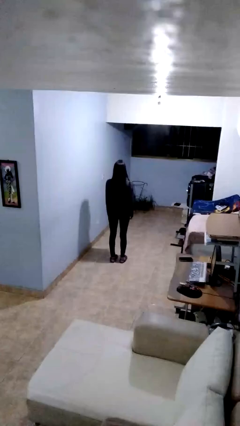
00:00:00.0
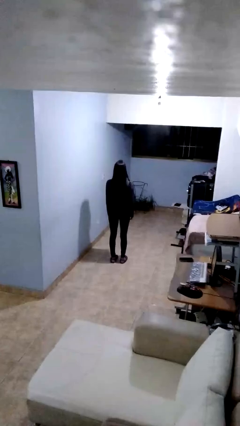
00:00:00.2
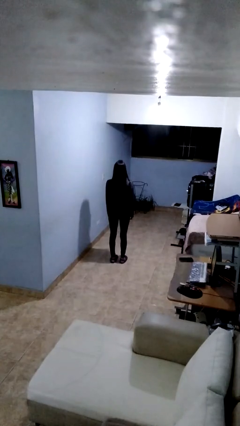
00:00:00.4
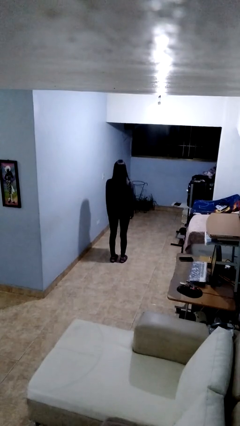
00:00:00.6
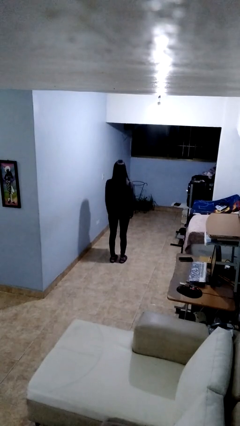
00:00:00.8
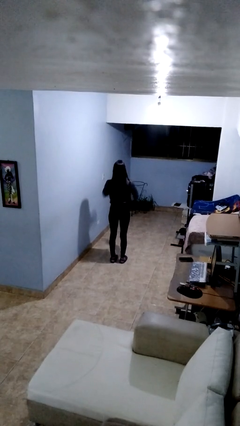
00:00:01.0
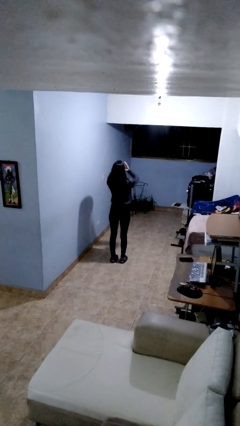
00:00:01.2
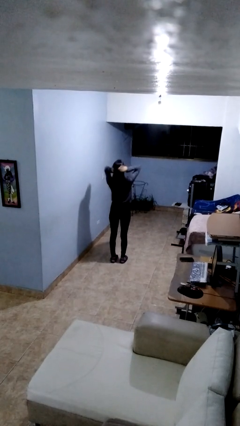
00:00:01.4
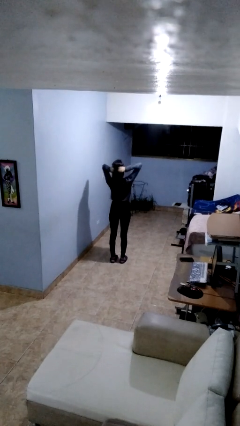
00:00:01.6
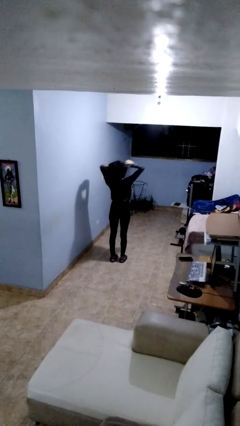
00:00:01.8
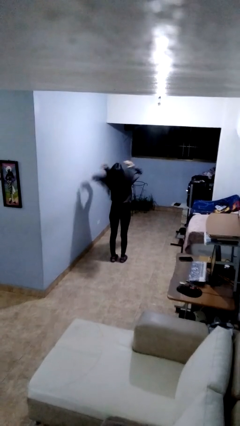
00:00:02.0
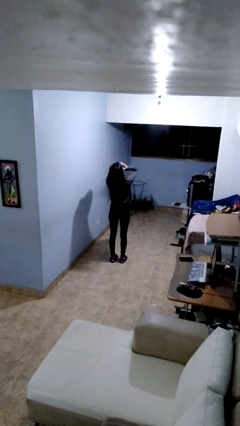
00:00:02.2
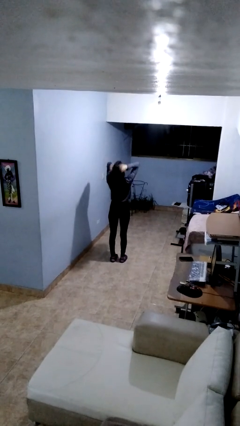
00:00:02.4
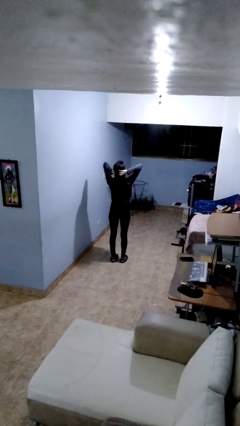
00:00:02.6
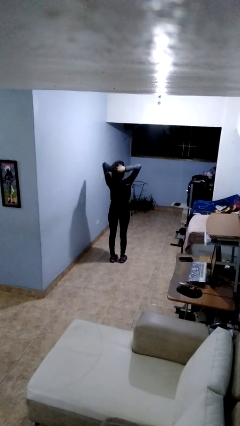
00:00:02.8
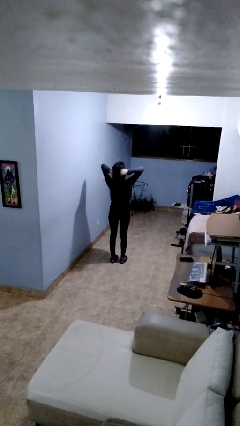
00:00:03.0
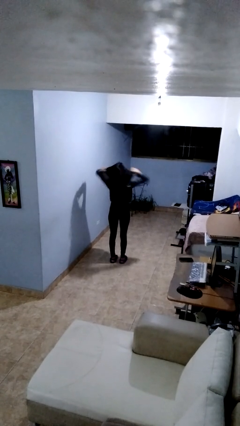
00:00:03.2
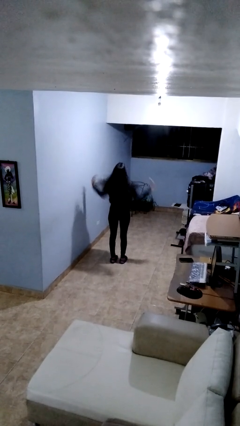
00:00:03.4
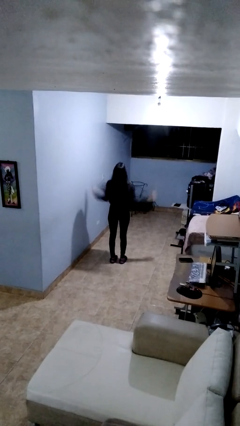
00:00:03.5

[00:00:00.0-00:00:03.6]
person strokes hair

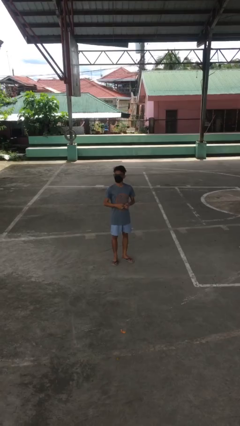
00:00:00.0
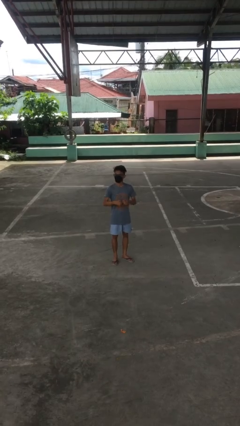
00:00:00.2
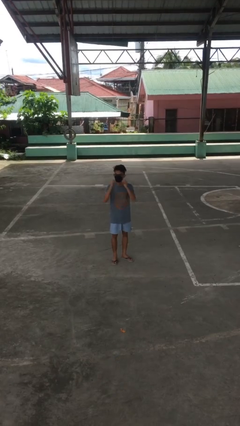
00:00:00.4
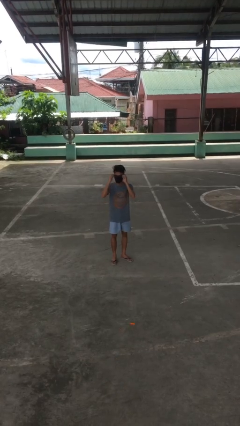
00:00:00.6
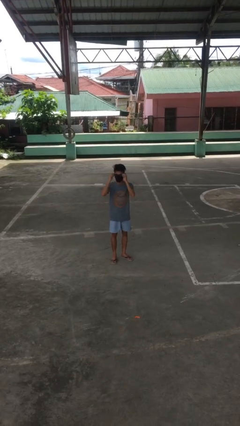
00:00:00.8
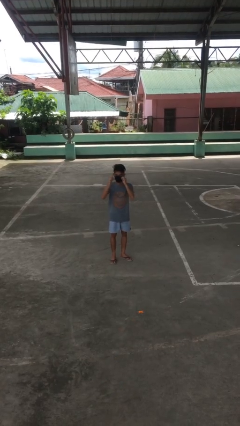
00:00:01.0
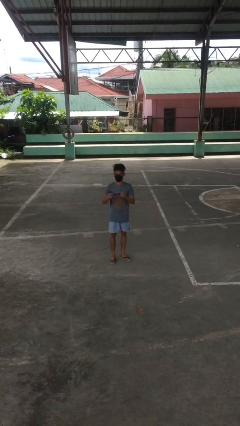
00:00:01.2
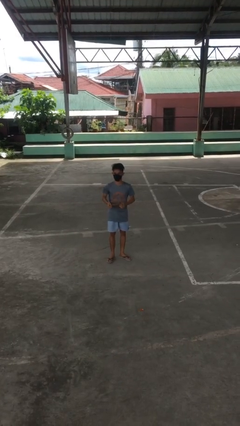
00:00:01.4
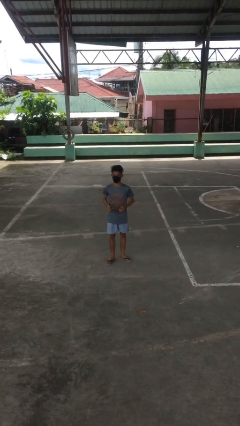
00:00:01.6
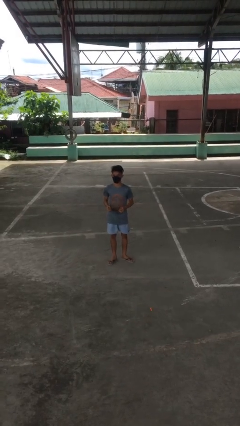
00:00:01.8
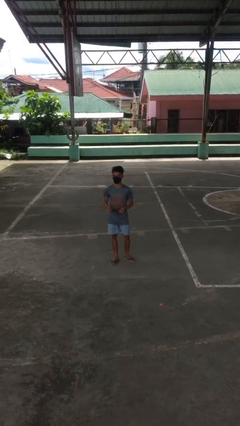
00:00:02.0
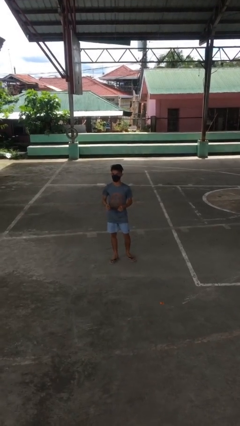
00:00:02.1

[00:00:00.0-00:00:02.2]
person takes off glasses

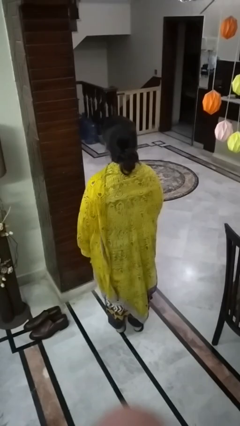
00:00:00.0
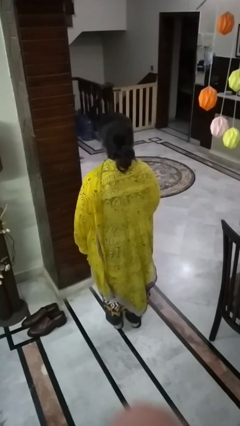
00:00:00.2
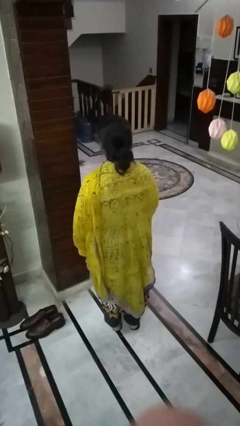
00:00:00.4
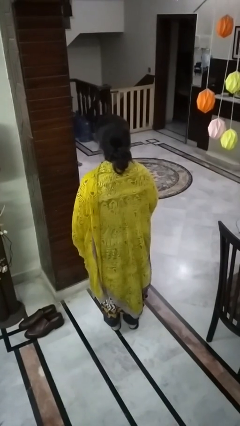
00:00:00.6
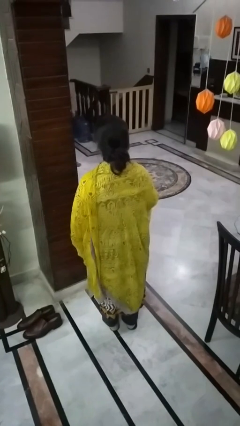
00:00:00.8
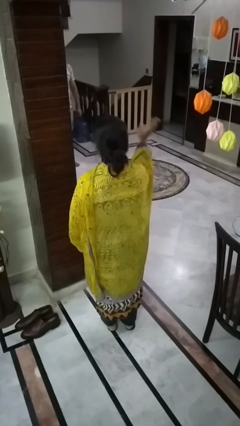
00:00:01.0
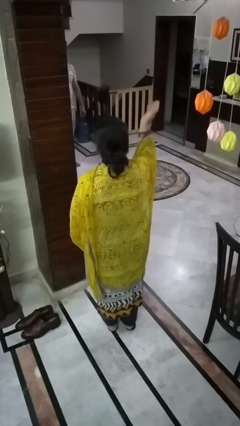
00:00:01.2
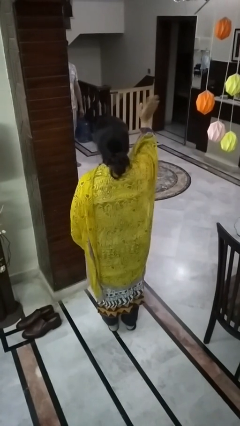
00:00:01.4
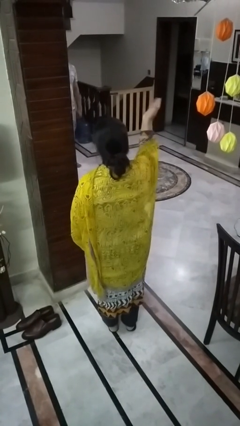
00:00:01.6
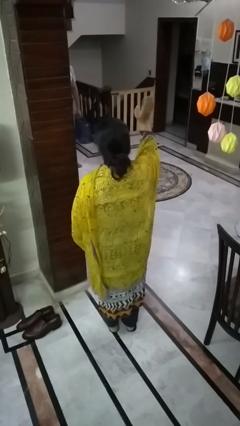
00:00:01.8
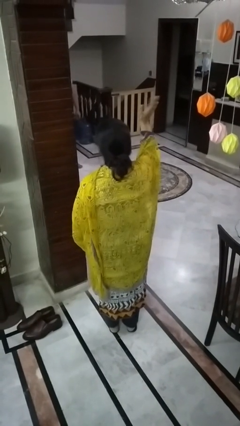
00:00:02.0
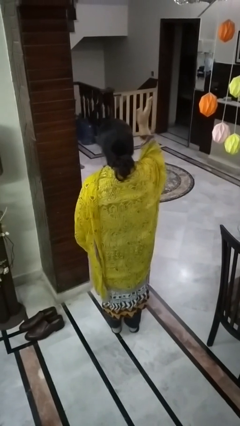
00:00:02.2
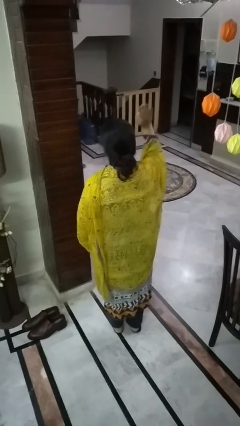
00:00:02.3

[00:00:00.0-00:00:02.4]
person waves at person

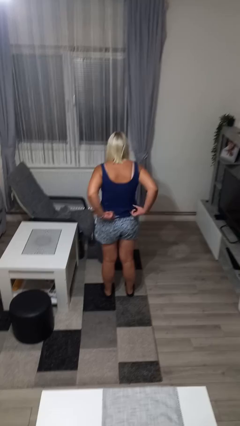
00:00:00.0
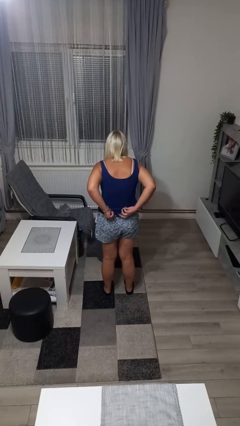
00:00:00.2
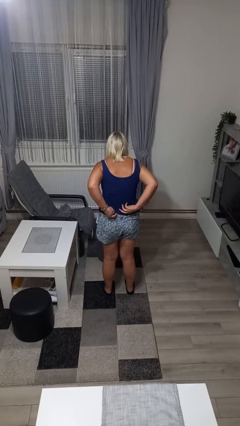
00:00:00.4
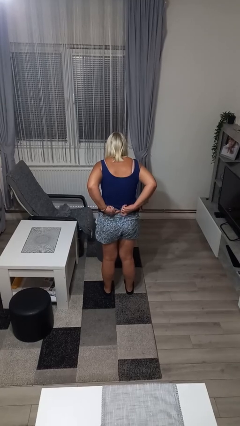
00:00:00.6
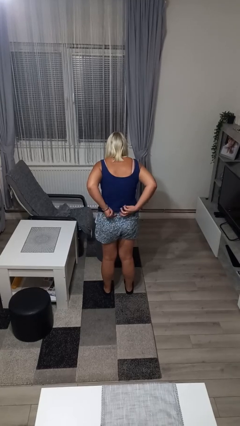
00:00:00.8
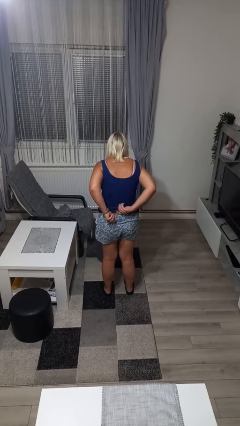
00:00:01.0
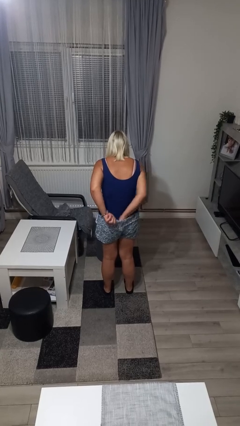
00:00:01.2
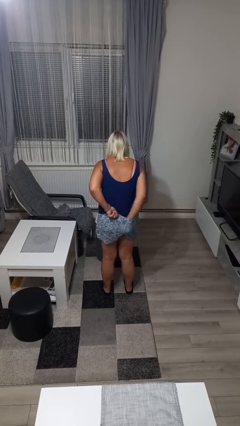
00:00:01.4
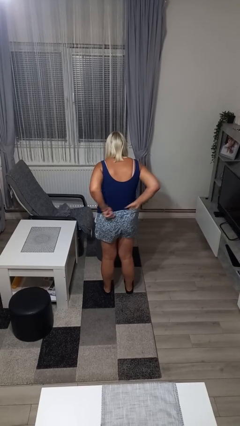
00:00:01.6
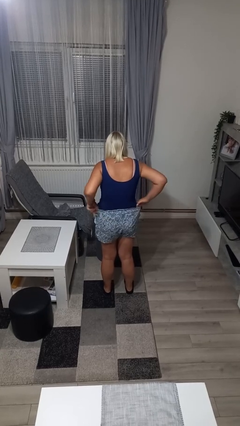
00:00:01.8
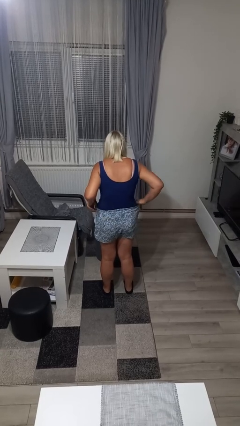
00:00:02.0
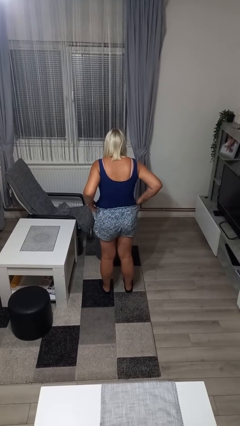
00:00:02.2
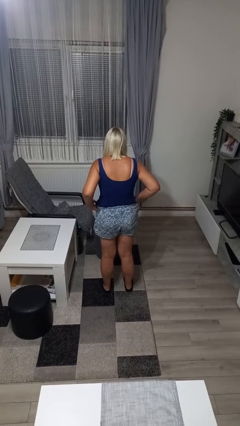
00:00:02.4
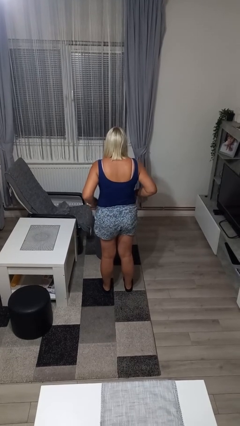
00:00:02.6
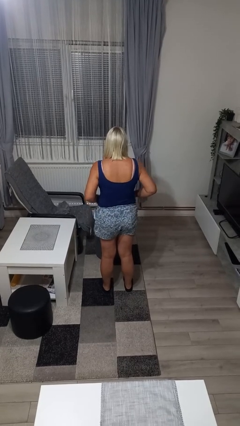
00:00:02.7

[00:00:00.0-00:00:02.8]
person tucks in shirt

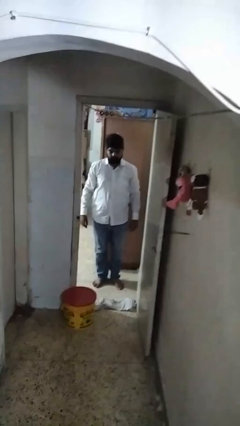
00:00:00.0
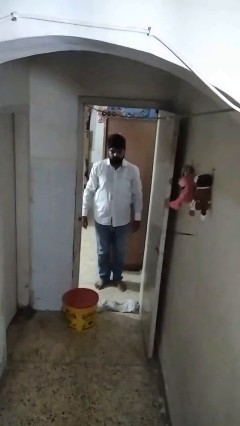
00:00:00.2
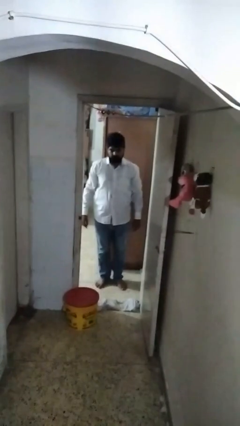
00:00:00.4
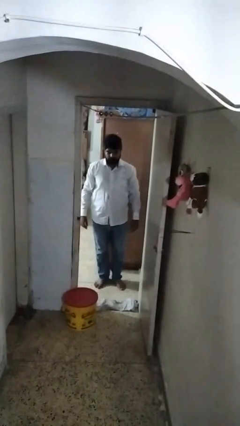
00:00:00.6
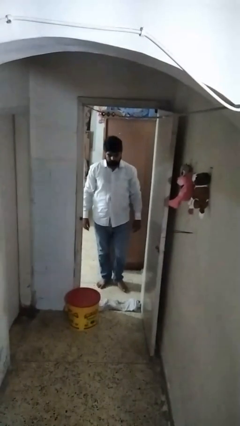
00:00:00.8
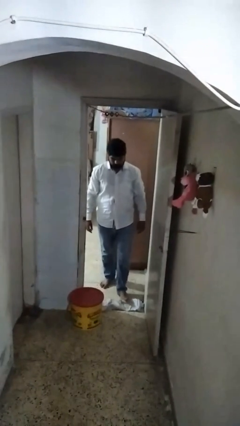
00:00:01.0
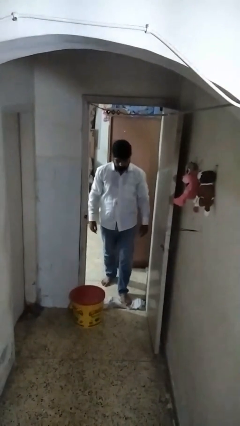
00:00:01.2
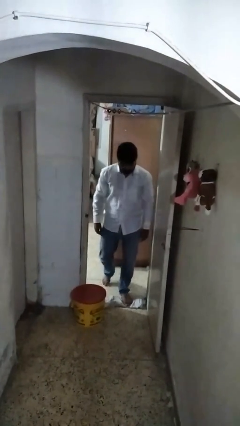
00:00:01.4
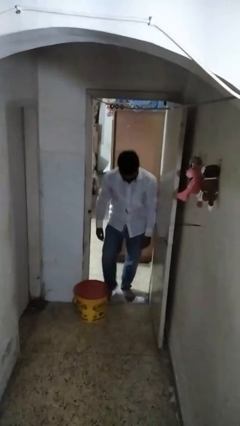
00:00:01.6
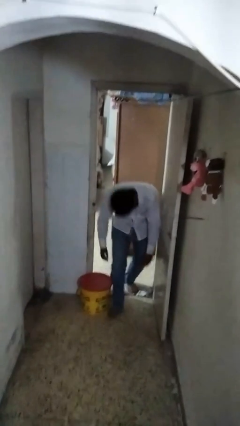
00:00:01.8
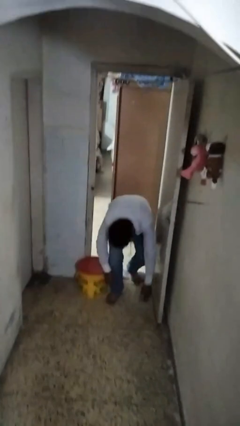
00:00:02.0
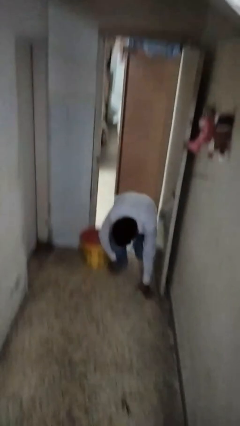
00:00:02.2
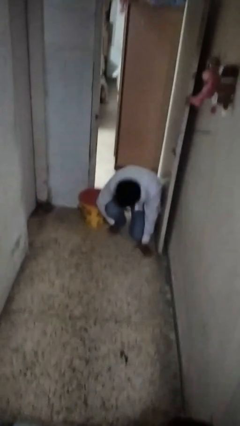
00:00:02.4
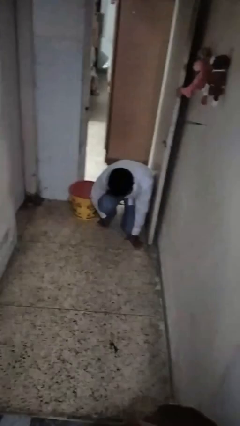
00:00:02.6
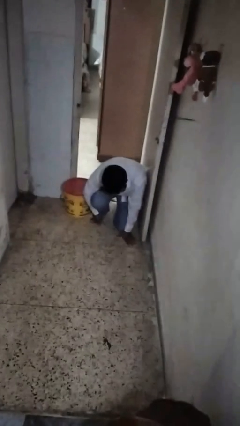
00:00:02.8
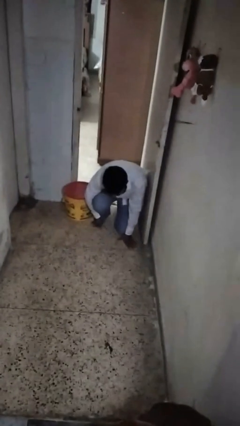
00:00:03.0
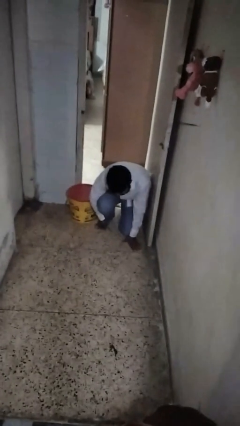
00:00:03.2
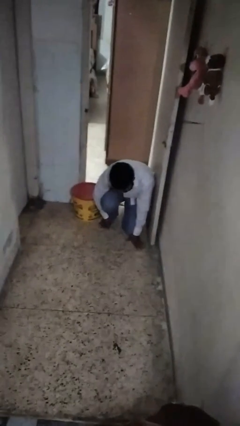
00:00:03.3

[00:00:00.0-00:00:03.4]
person trips on object on floor

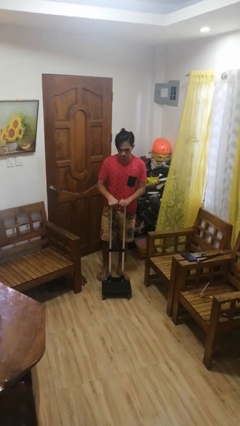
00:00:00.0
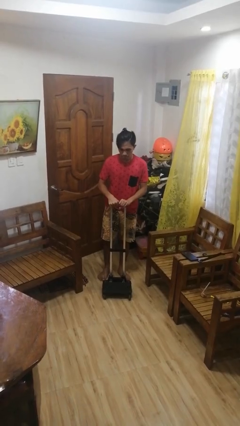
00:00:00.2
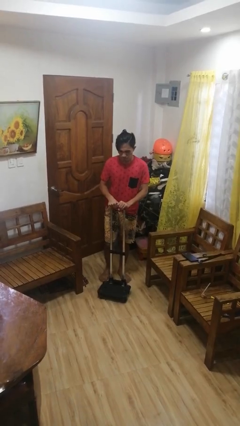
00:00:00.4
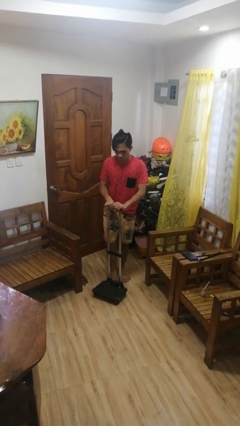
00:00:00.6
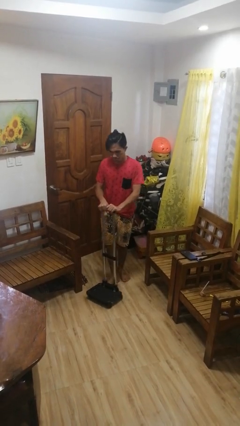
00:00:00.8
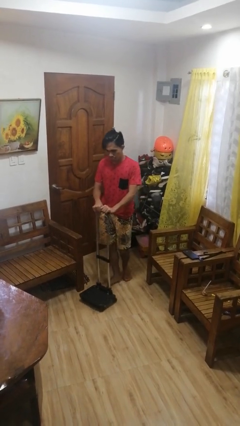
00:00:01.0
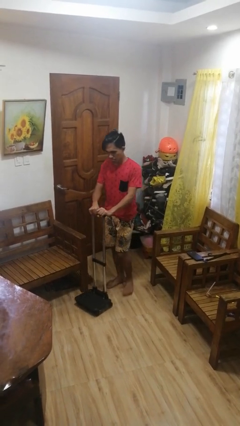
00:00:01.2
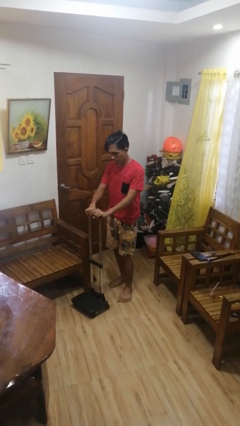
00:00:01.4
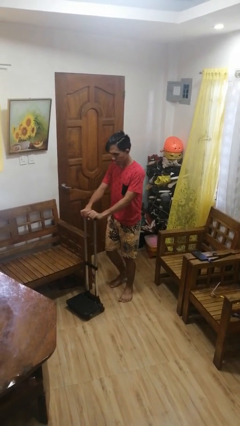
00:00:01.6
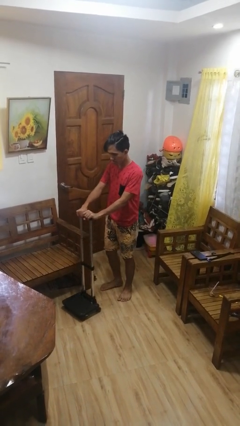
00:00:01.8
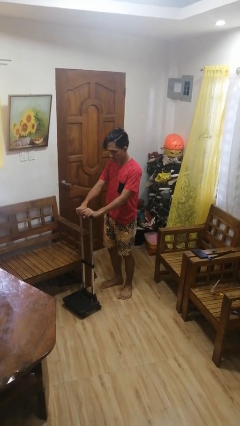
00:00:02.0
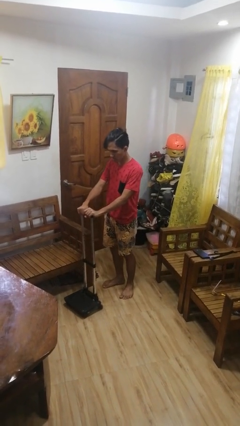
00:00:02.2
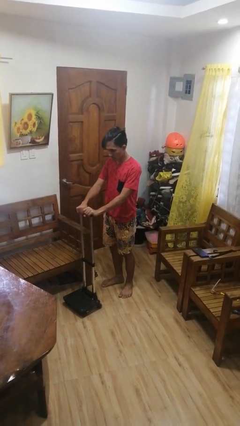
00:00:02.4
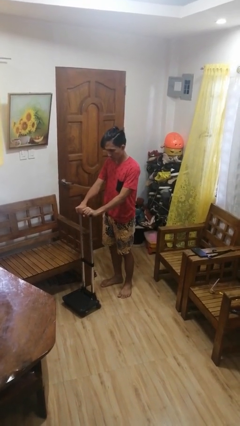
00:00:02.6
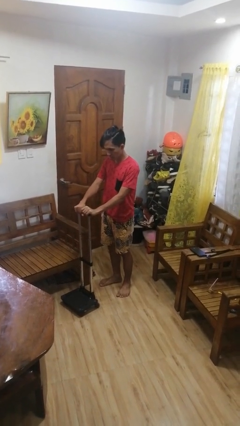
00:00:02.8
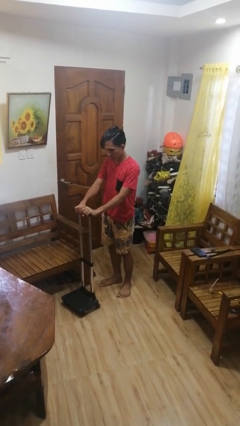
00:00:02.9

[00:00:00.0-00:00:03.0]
person pushes wheeled cart
